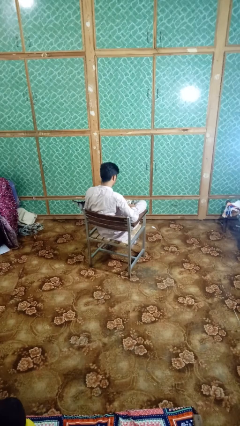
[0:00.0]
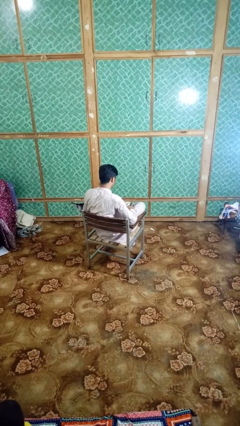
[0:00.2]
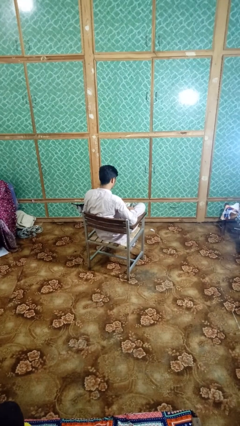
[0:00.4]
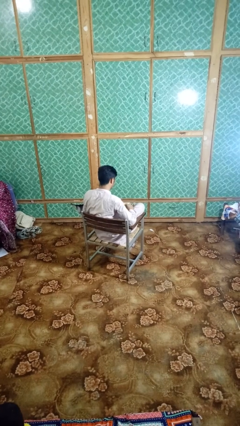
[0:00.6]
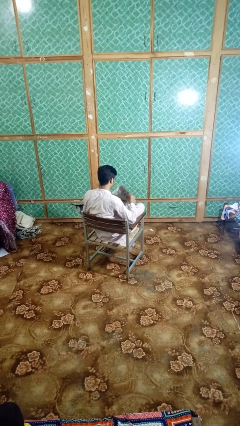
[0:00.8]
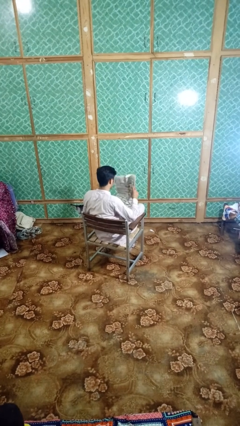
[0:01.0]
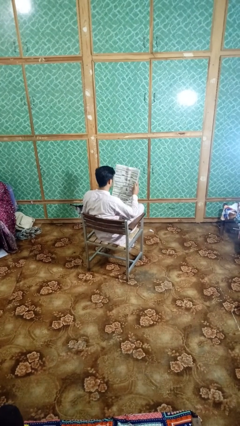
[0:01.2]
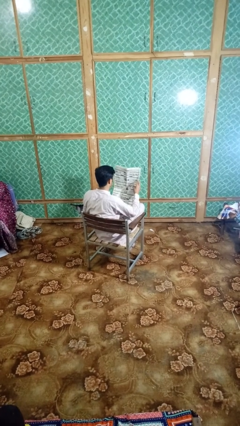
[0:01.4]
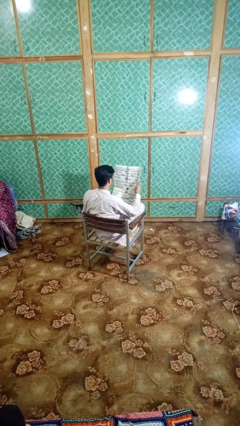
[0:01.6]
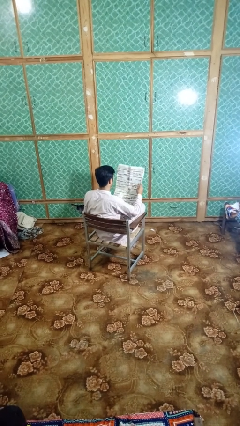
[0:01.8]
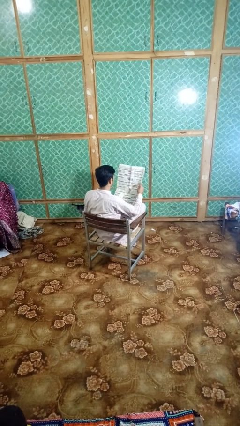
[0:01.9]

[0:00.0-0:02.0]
person reads newspaper

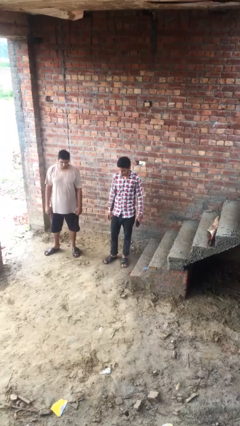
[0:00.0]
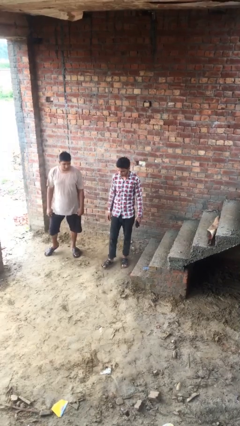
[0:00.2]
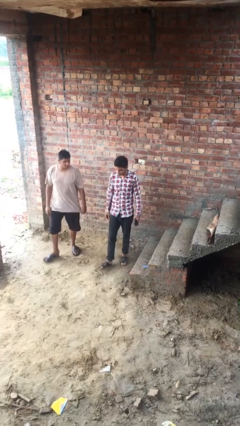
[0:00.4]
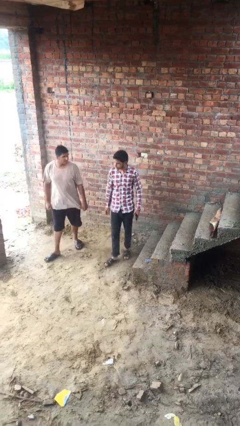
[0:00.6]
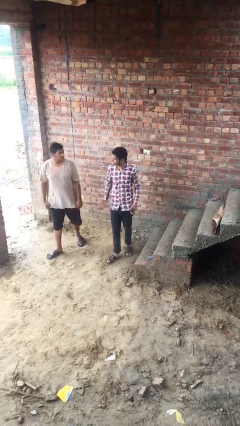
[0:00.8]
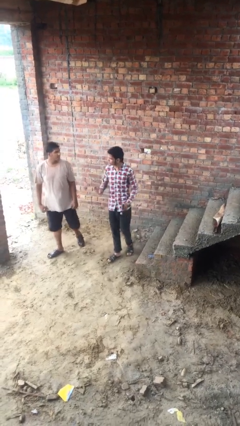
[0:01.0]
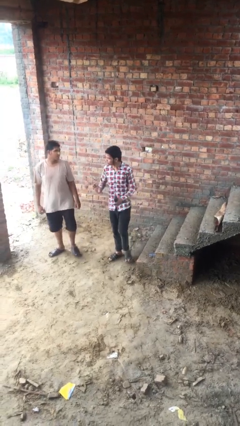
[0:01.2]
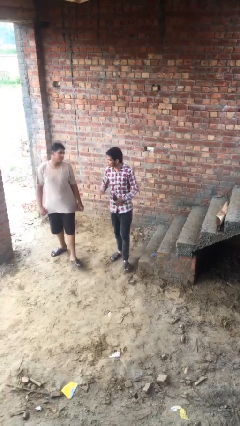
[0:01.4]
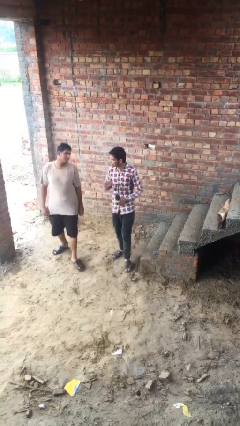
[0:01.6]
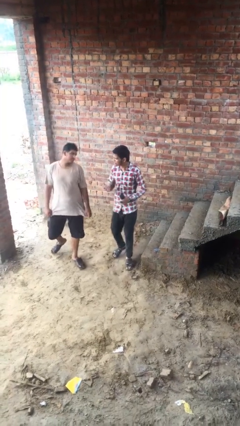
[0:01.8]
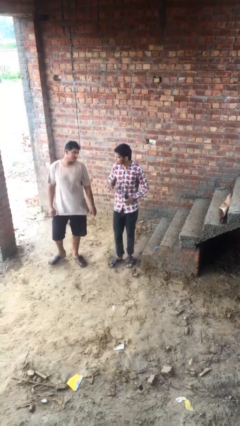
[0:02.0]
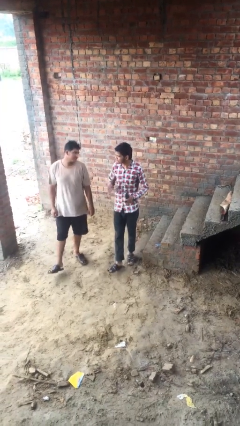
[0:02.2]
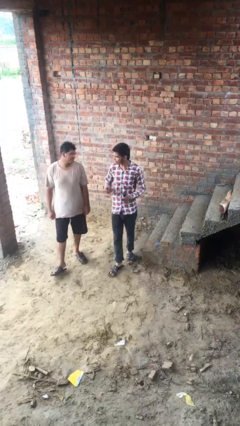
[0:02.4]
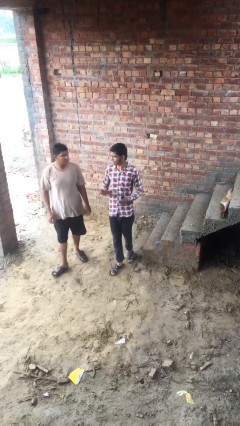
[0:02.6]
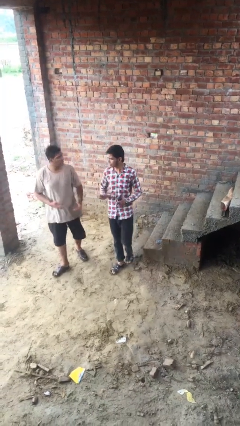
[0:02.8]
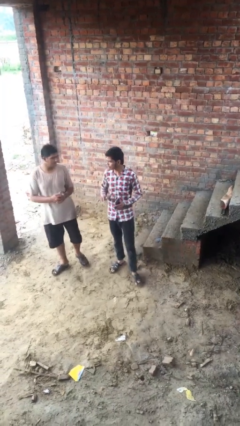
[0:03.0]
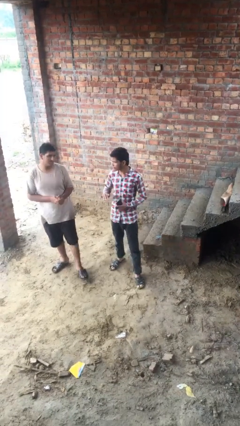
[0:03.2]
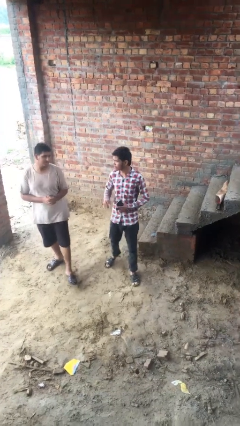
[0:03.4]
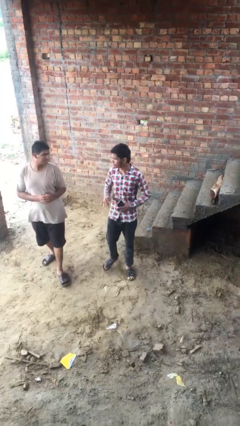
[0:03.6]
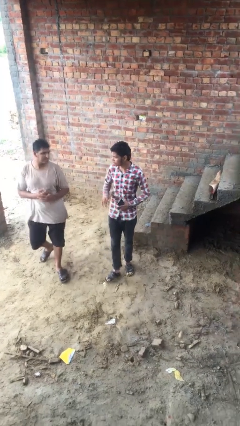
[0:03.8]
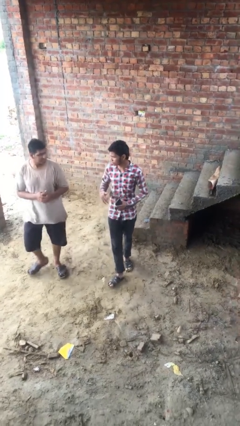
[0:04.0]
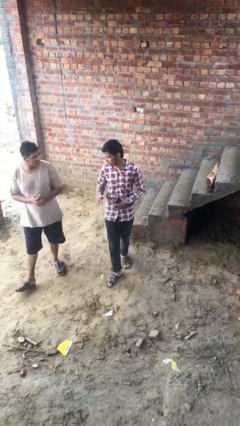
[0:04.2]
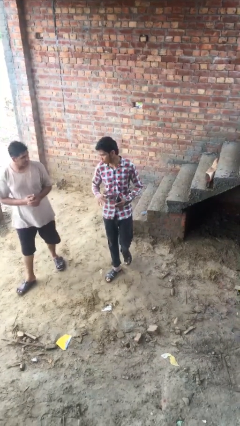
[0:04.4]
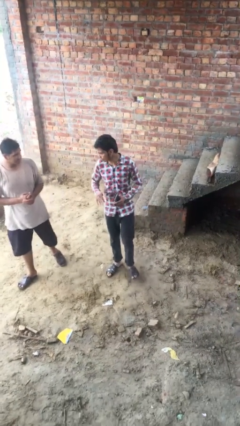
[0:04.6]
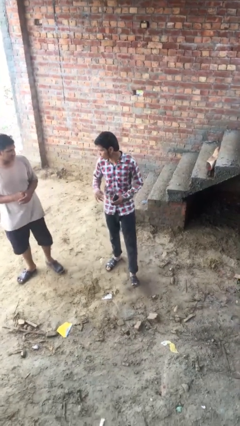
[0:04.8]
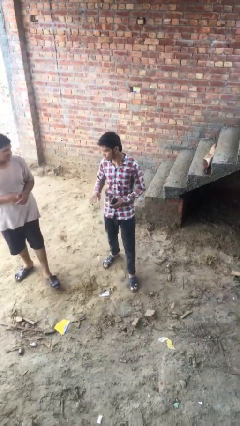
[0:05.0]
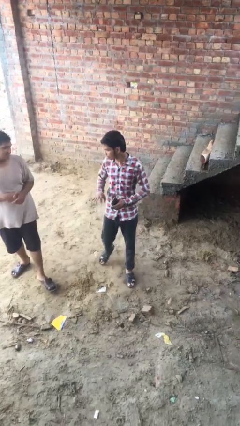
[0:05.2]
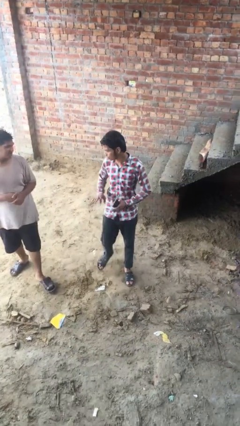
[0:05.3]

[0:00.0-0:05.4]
person talks to person

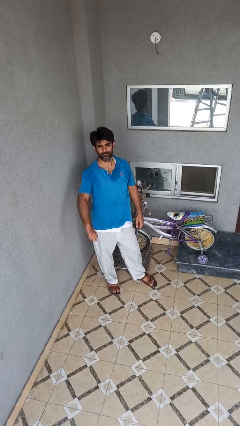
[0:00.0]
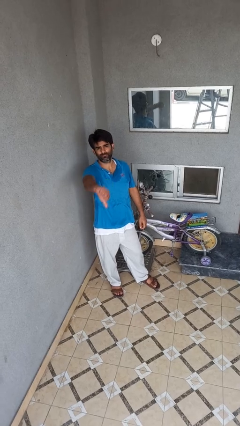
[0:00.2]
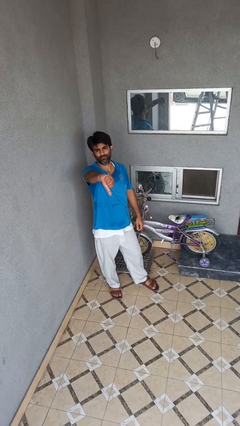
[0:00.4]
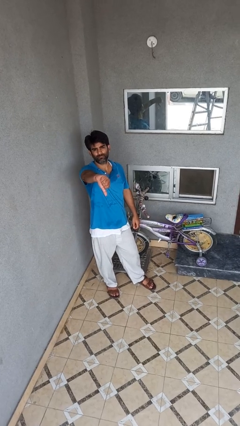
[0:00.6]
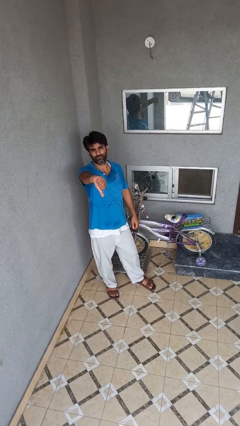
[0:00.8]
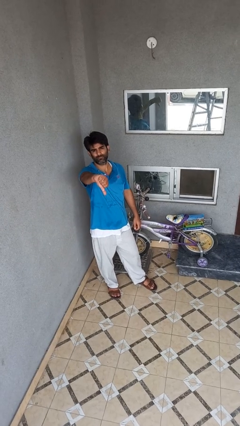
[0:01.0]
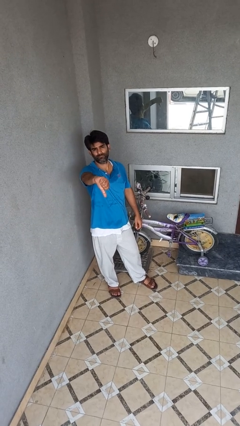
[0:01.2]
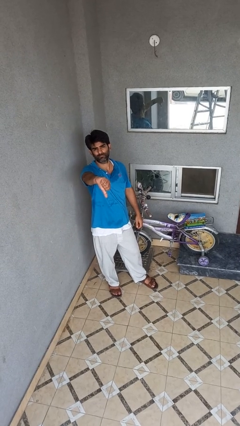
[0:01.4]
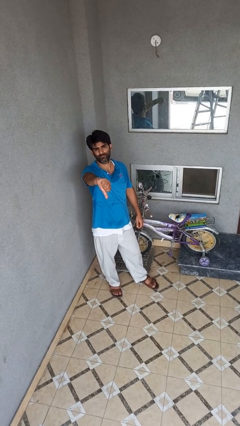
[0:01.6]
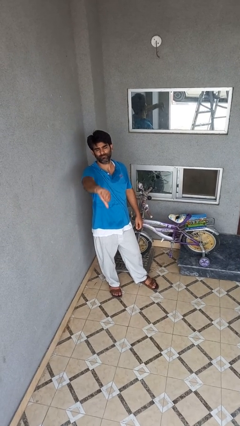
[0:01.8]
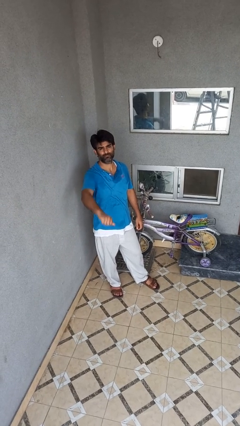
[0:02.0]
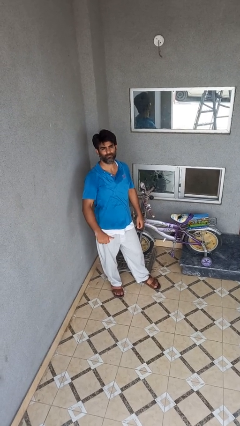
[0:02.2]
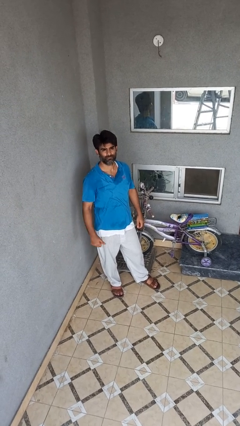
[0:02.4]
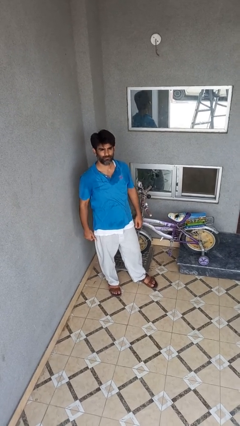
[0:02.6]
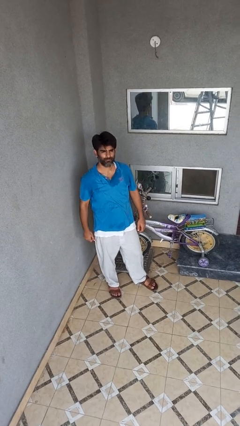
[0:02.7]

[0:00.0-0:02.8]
person gestures thumbs down

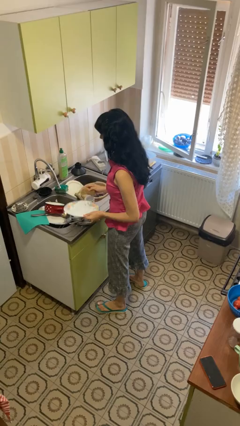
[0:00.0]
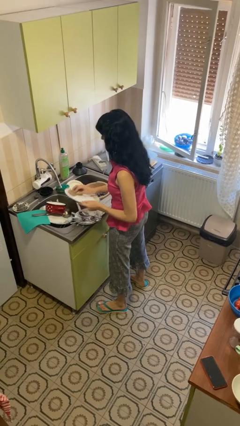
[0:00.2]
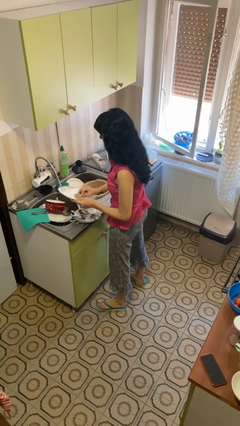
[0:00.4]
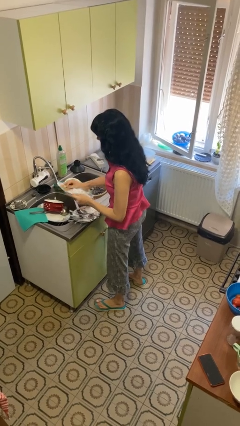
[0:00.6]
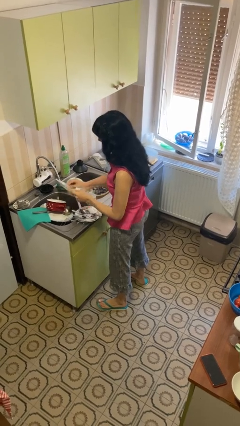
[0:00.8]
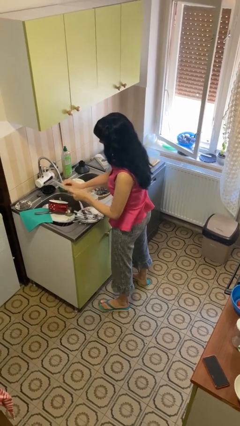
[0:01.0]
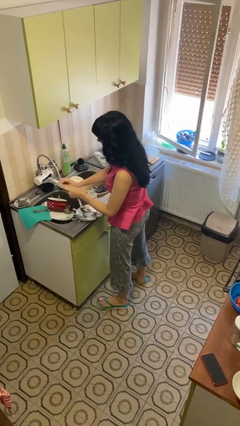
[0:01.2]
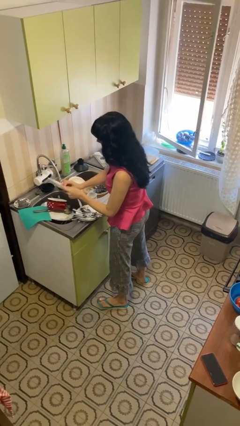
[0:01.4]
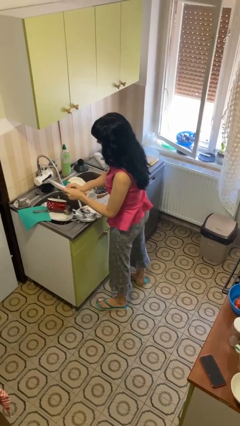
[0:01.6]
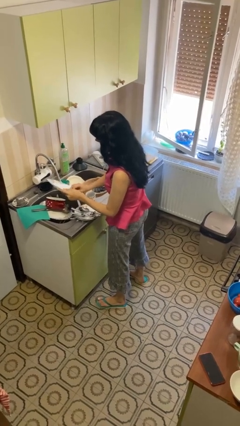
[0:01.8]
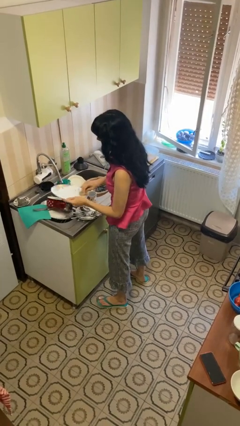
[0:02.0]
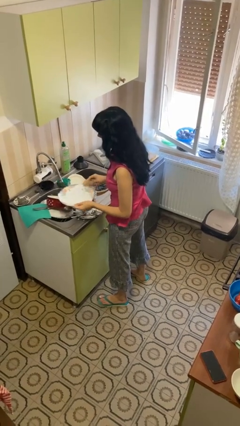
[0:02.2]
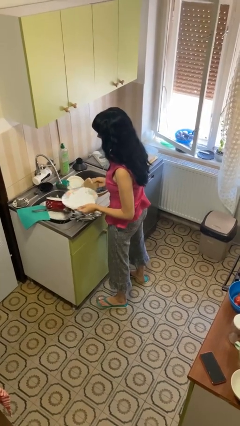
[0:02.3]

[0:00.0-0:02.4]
person washes dish

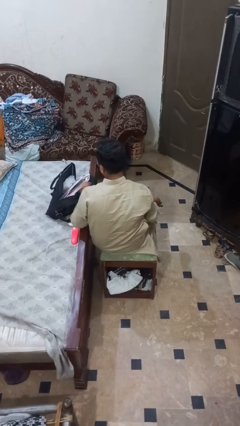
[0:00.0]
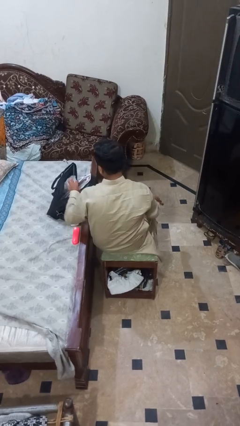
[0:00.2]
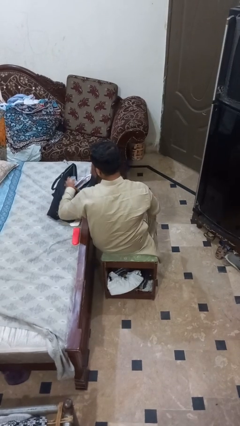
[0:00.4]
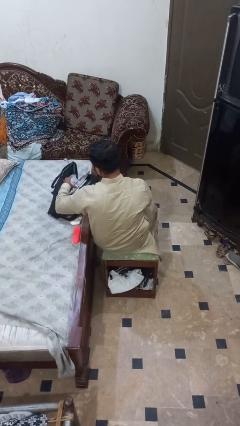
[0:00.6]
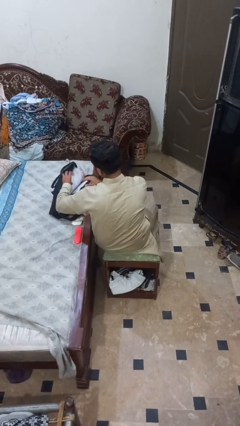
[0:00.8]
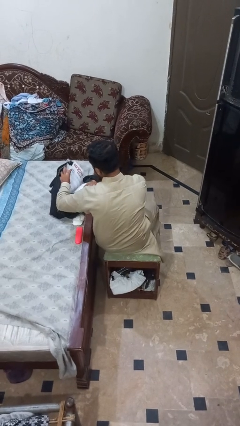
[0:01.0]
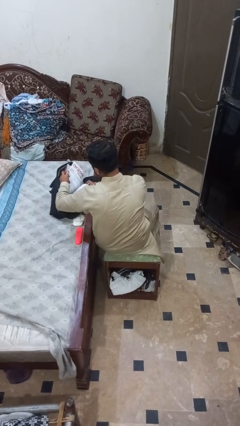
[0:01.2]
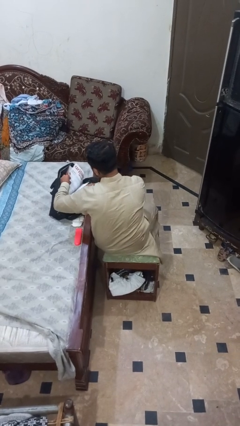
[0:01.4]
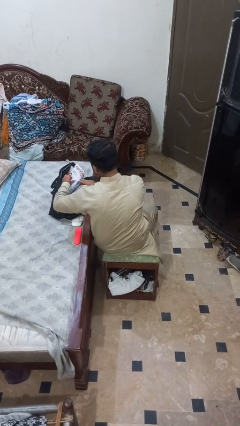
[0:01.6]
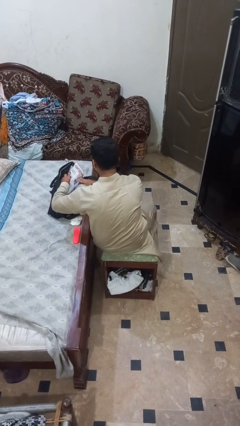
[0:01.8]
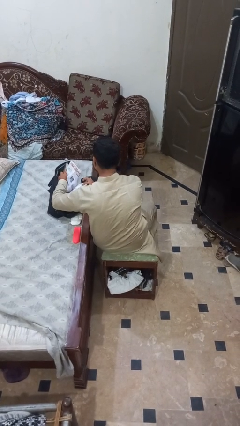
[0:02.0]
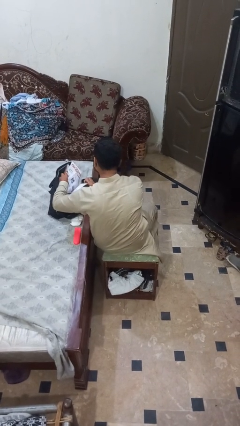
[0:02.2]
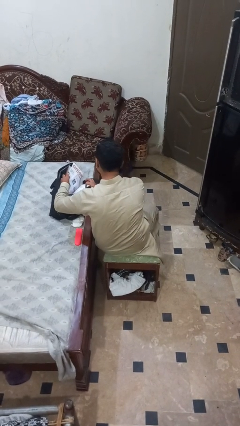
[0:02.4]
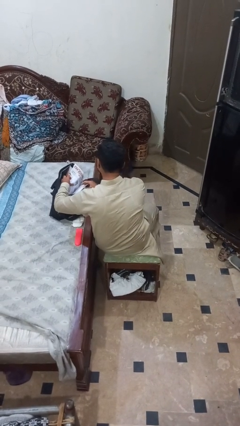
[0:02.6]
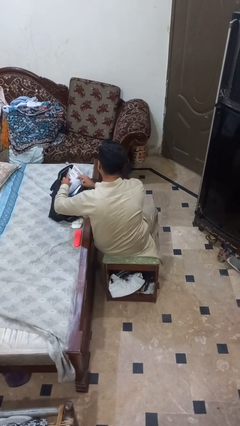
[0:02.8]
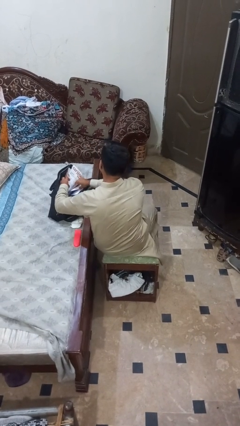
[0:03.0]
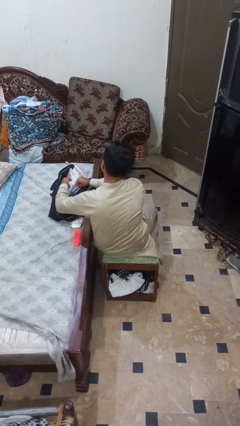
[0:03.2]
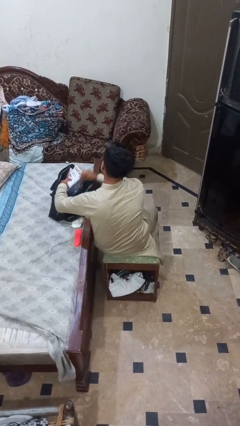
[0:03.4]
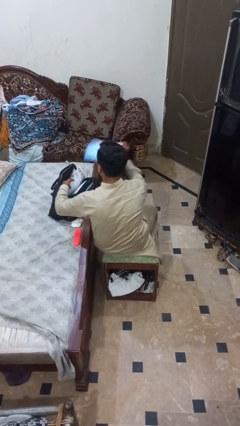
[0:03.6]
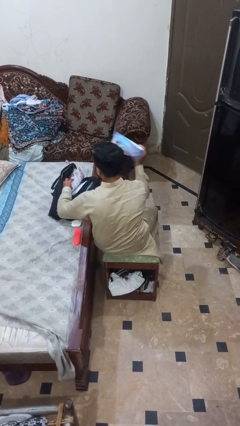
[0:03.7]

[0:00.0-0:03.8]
person searches in bag

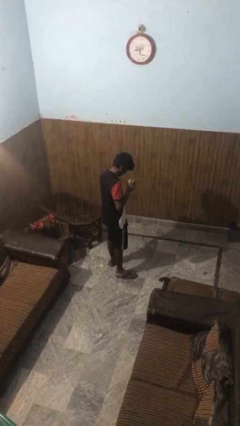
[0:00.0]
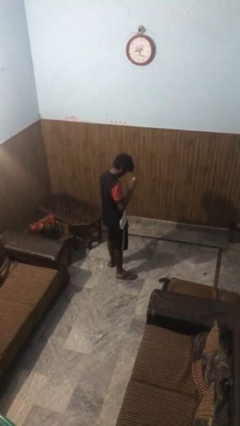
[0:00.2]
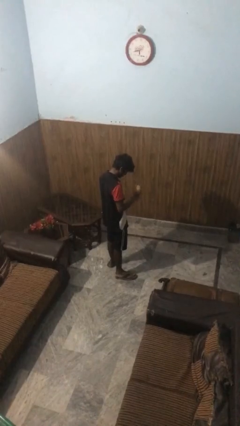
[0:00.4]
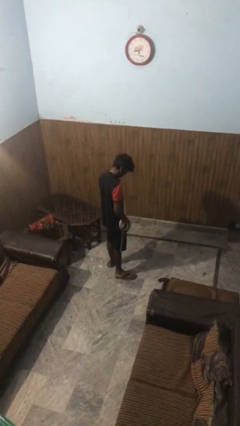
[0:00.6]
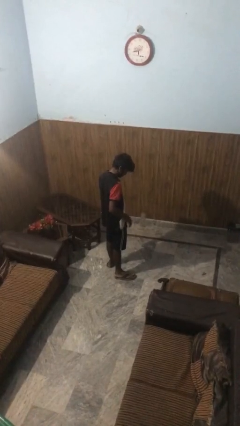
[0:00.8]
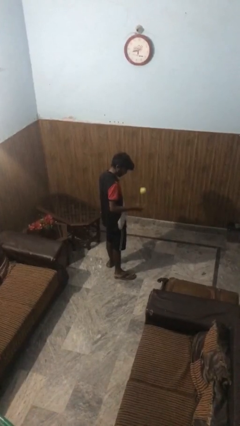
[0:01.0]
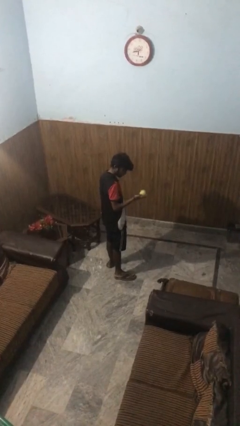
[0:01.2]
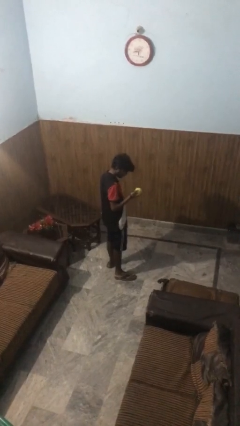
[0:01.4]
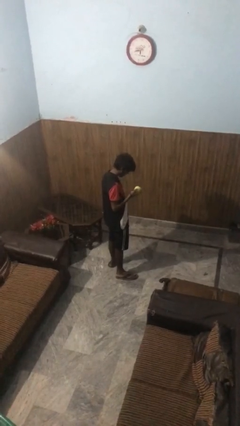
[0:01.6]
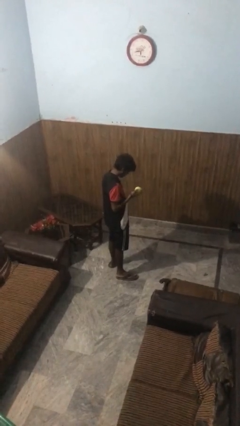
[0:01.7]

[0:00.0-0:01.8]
person bounces ball on floor
